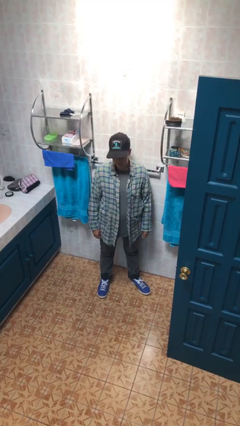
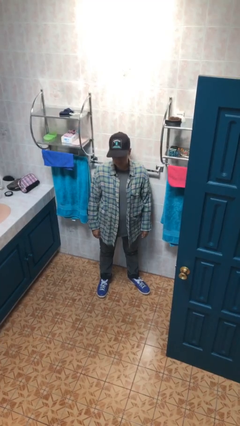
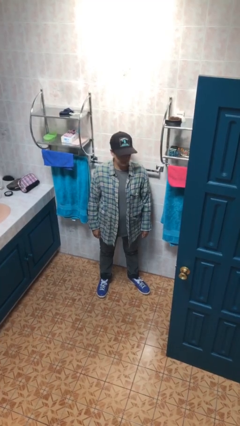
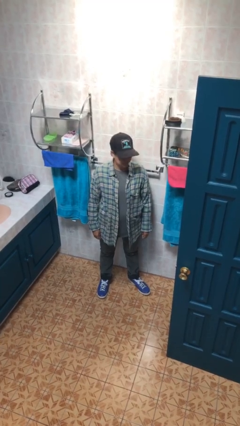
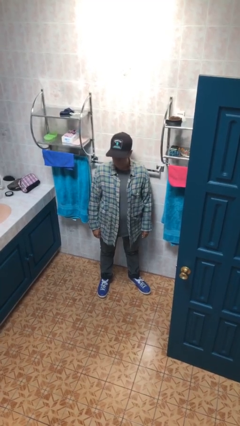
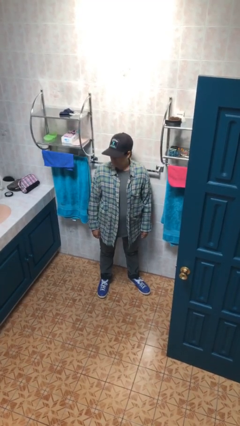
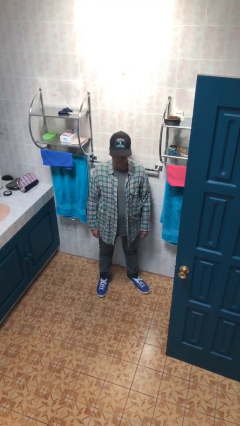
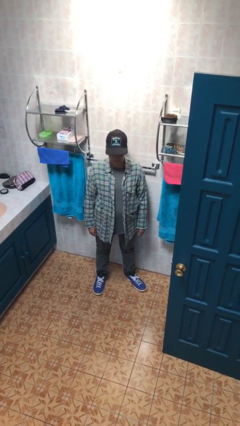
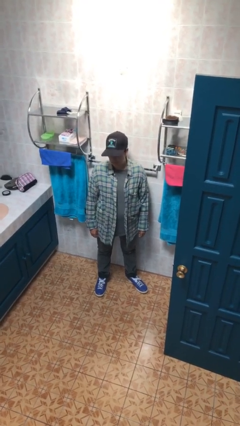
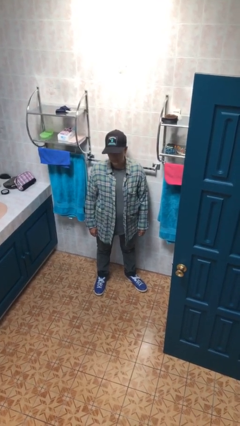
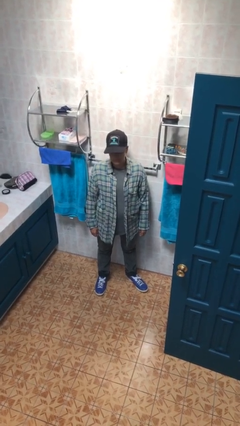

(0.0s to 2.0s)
person shakes head

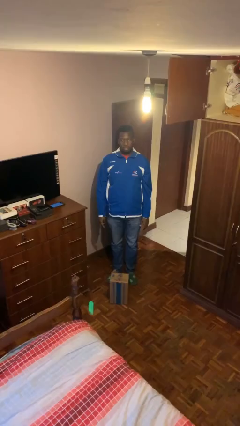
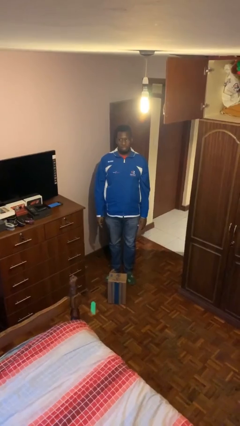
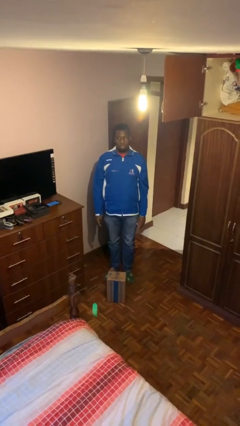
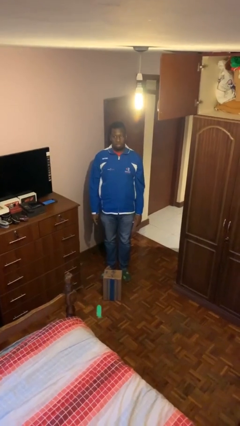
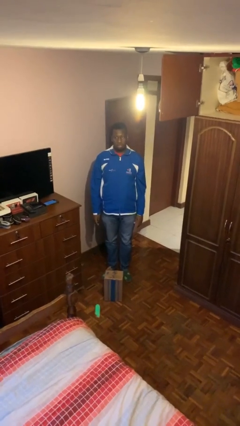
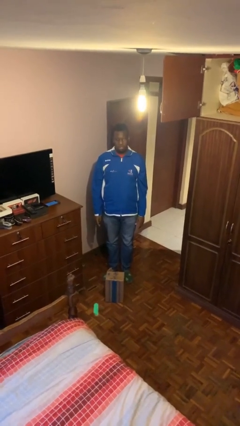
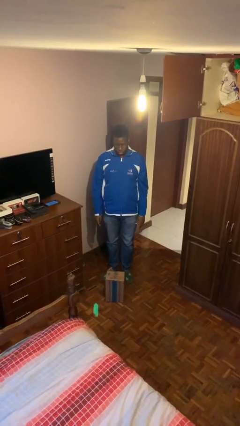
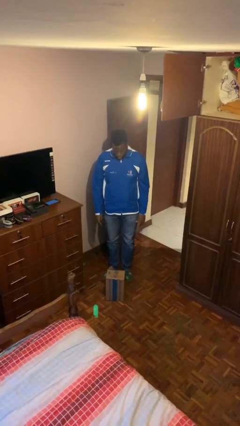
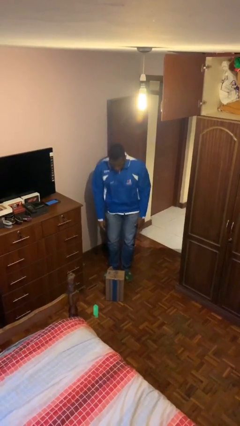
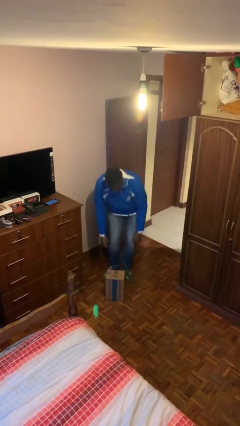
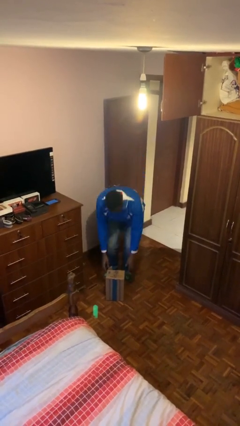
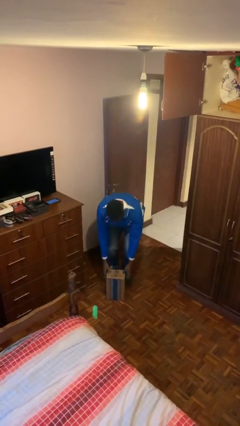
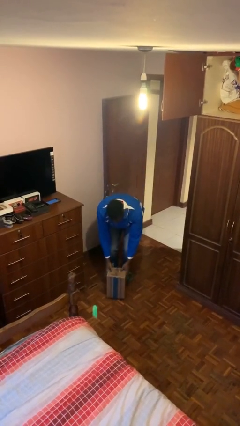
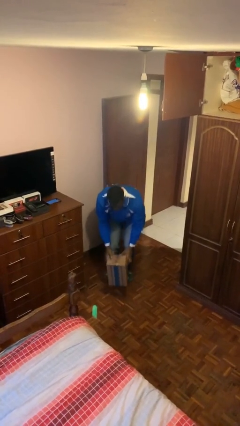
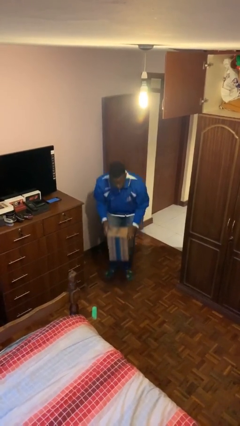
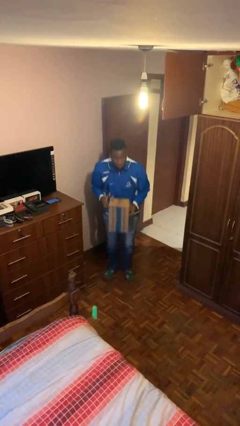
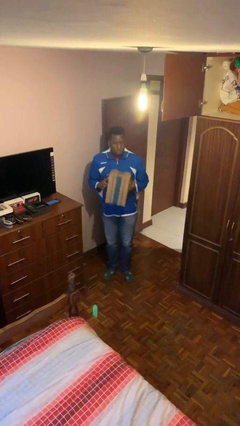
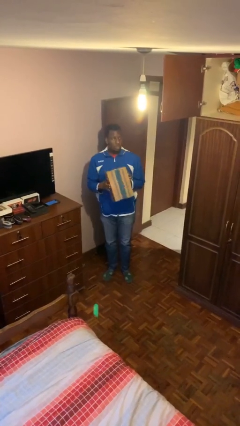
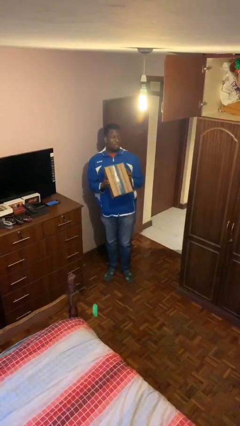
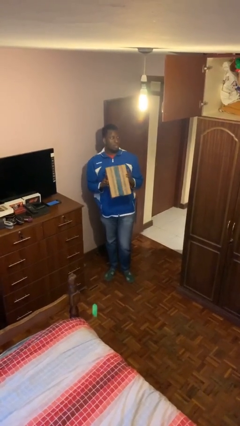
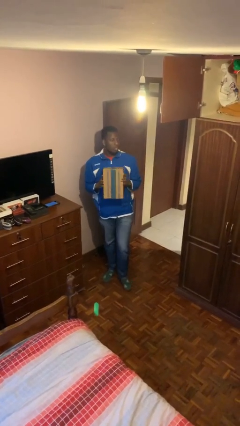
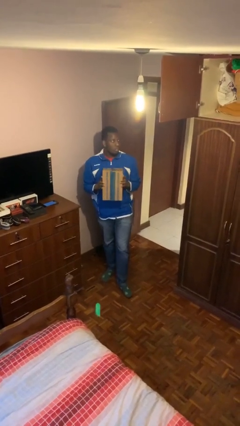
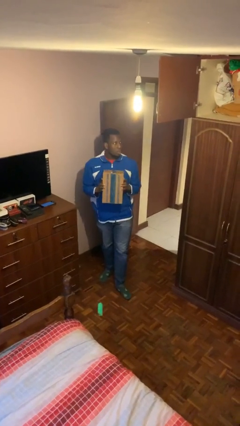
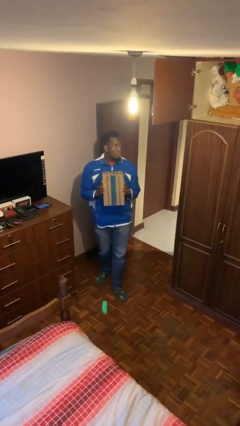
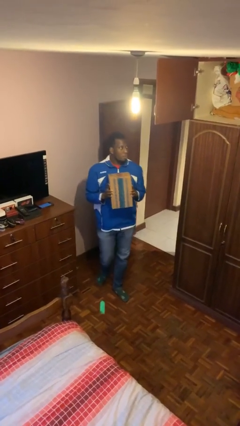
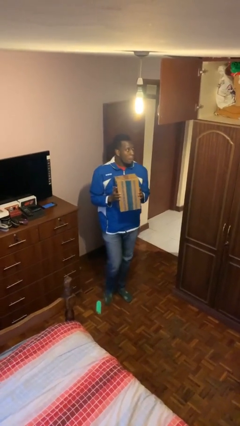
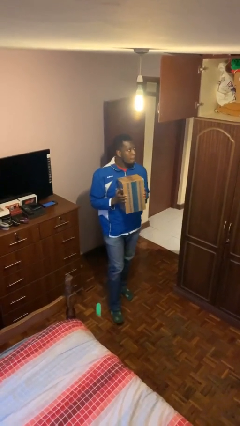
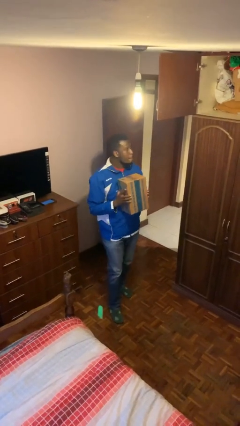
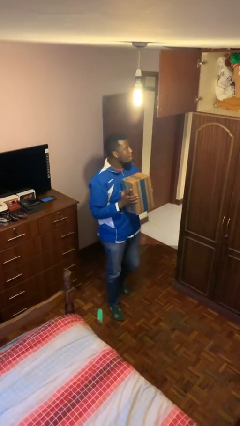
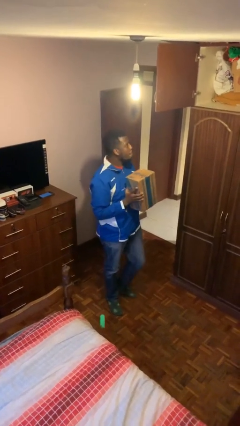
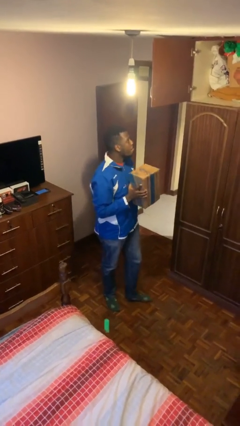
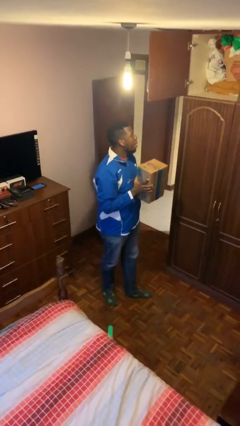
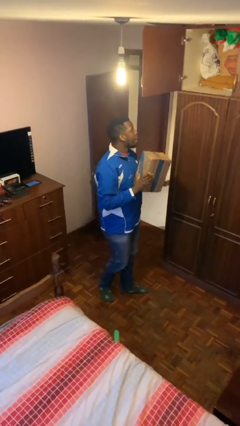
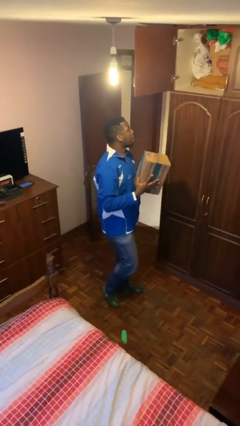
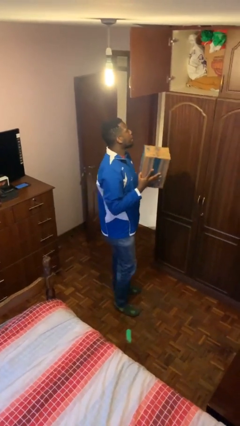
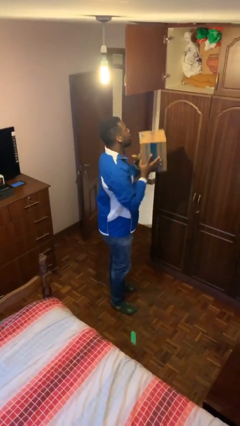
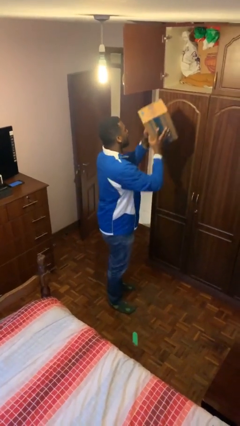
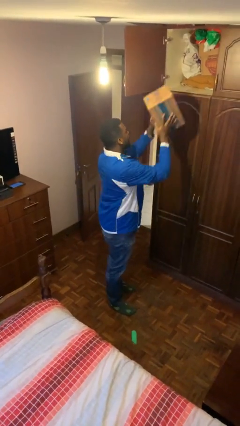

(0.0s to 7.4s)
person picks up object from floor

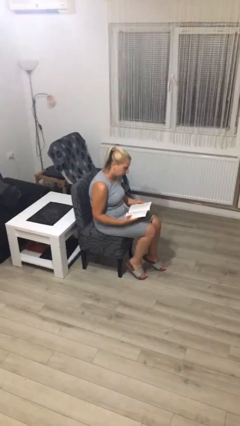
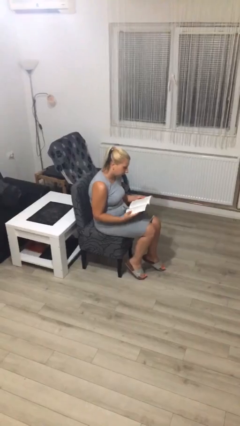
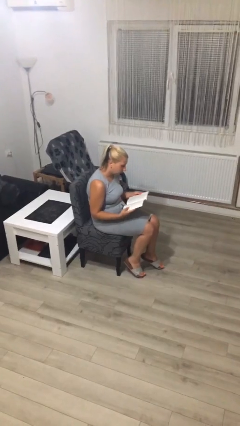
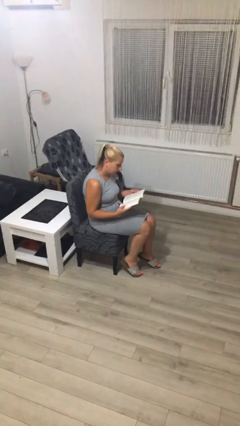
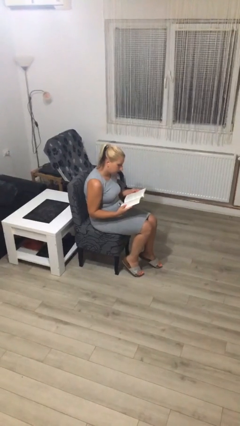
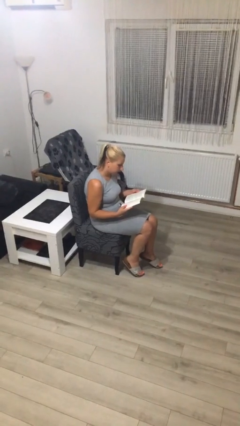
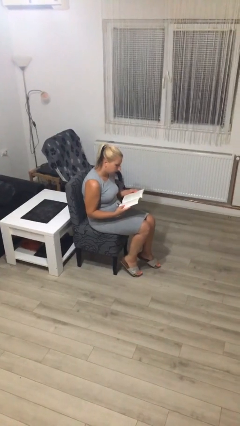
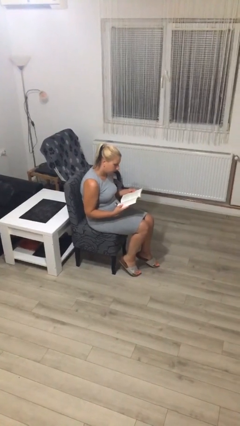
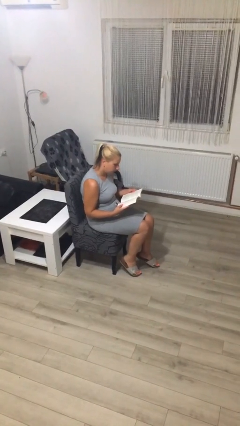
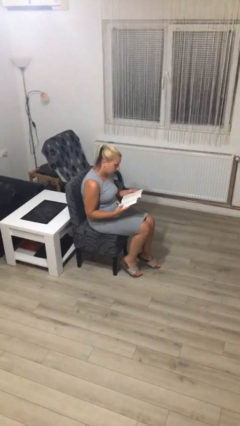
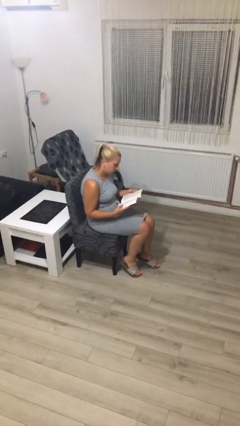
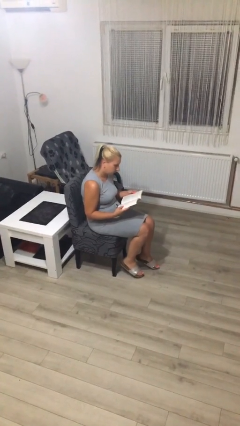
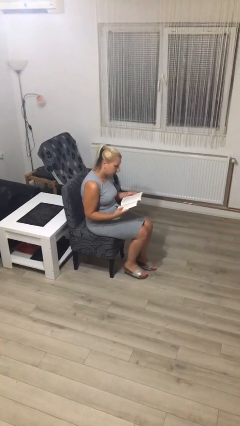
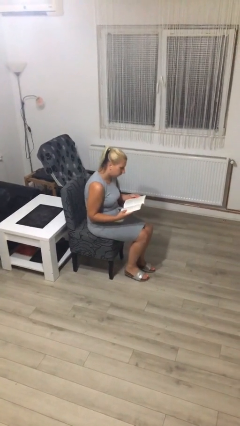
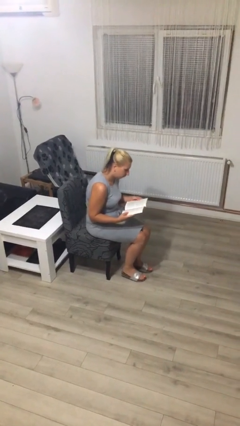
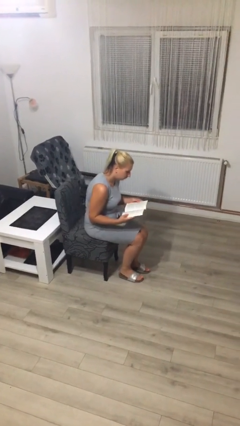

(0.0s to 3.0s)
person reads document

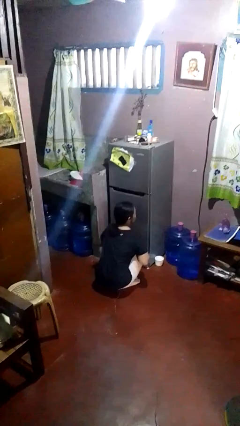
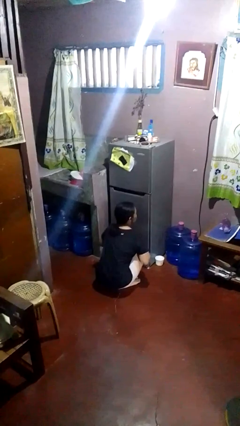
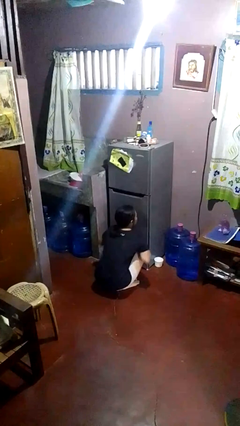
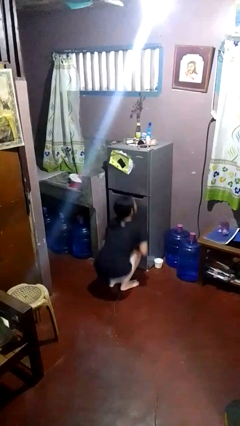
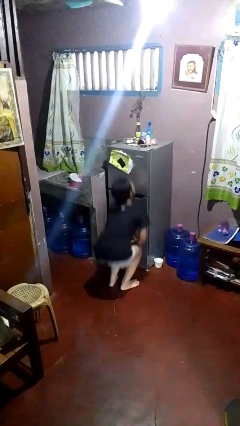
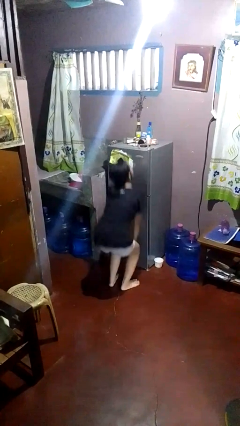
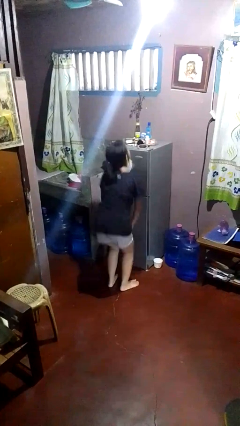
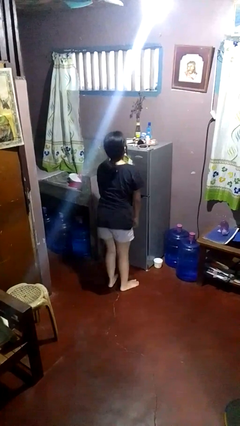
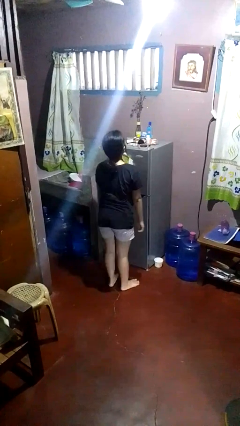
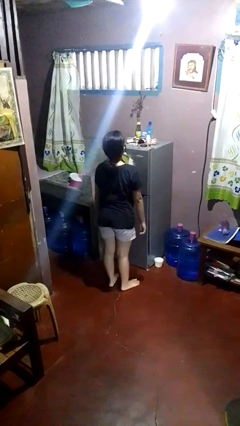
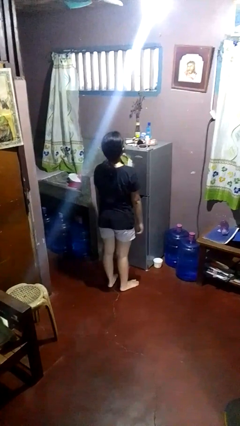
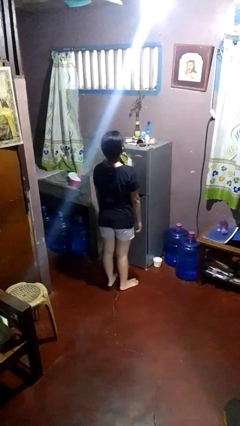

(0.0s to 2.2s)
person stands up

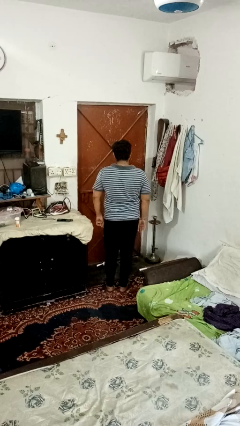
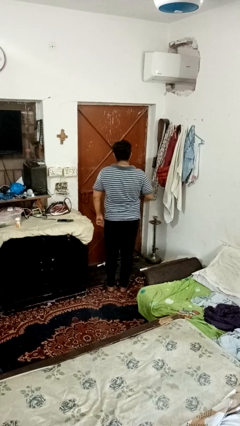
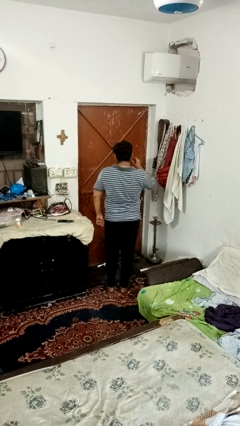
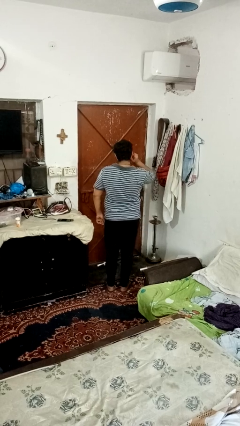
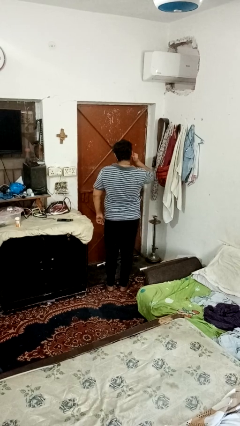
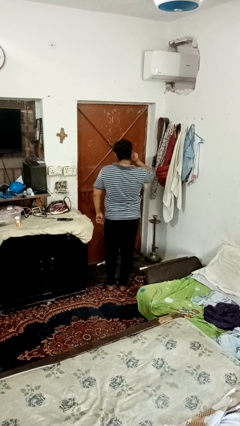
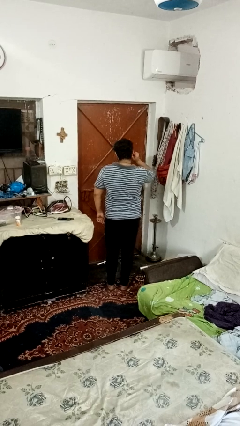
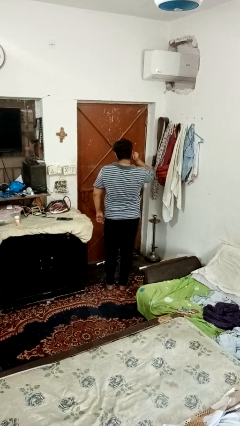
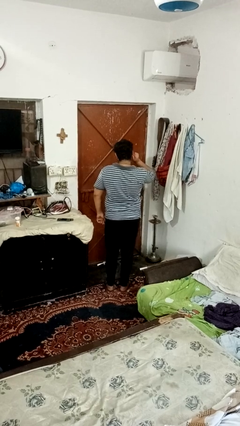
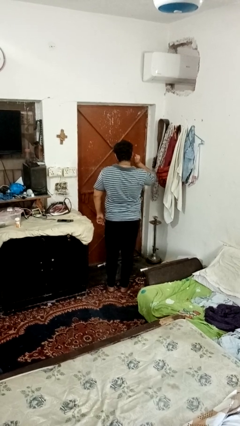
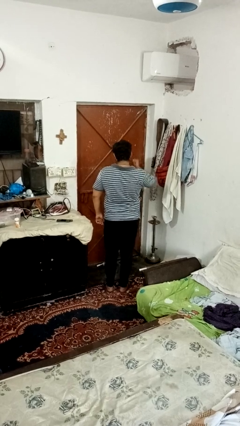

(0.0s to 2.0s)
person touches earlobe

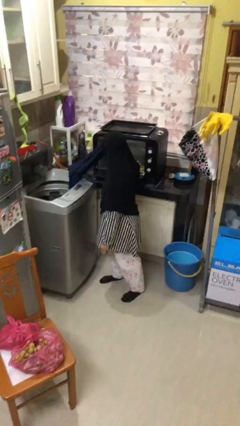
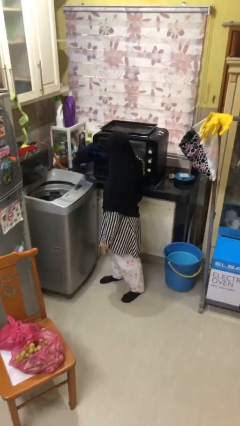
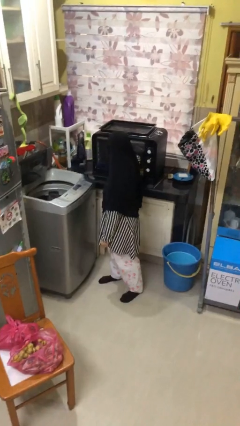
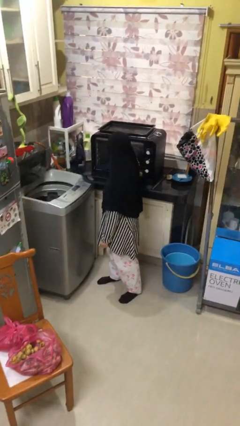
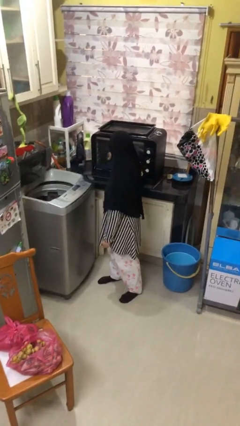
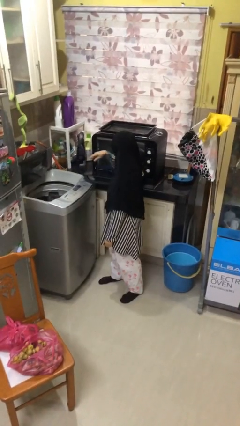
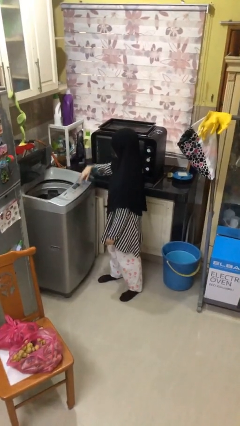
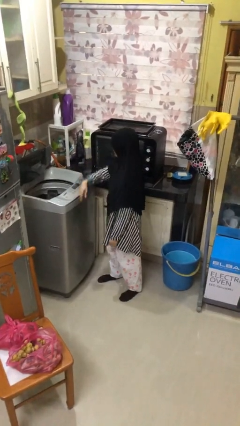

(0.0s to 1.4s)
person loads dryer
